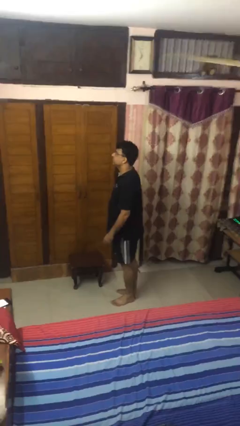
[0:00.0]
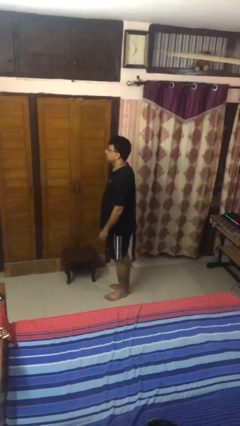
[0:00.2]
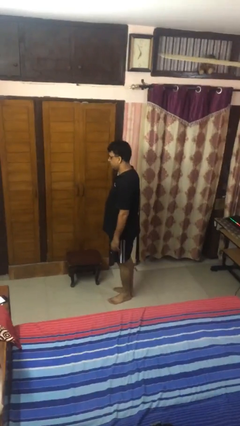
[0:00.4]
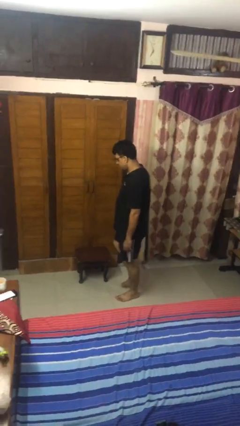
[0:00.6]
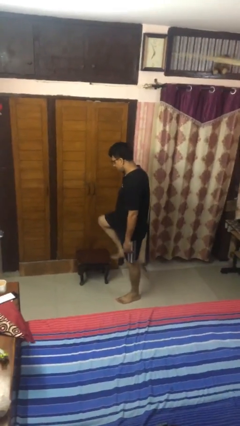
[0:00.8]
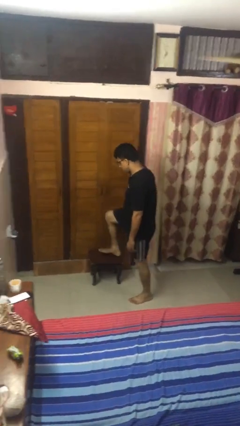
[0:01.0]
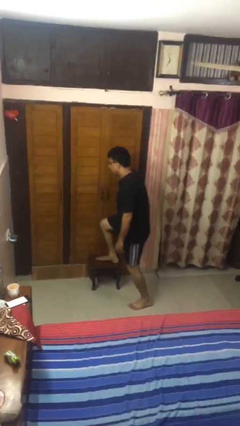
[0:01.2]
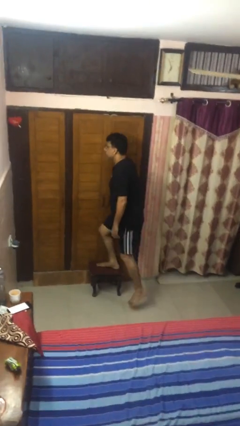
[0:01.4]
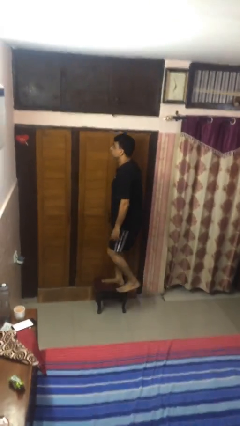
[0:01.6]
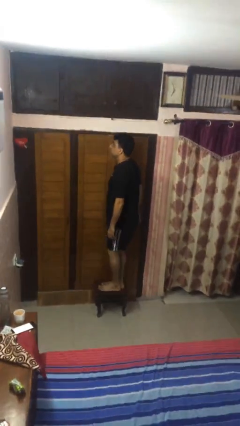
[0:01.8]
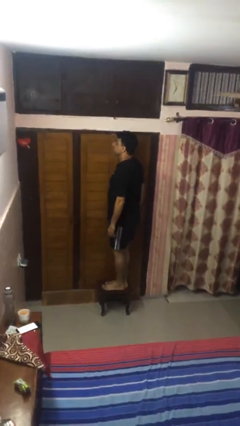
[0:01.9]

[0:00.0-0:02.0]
person climbs on table

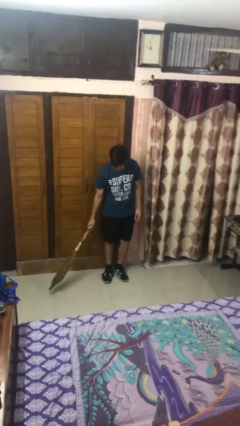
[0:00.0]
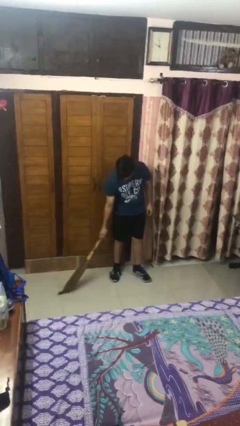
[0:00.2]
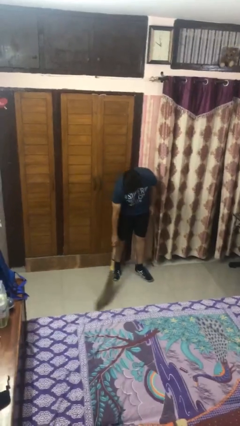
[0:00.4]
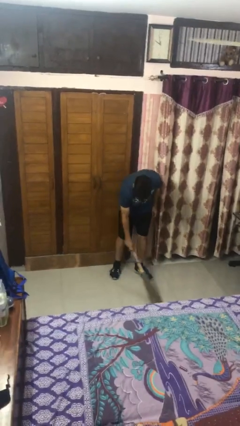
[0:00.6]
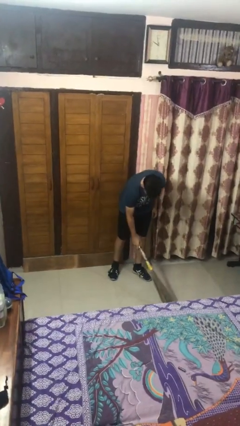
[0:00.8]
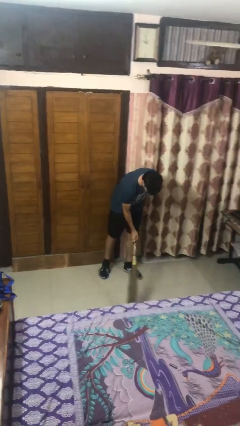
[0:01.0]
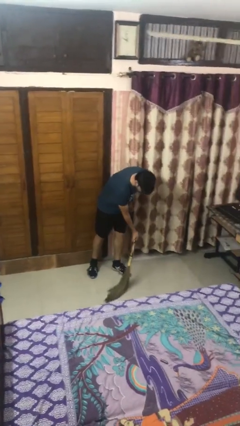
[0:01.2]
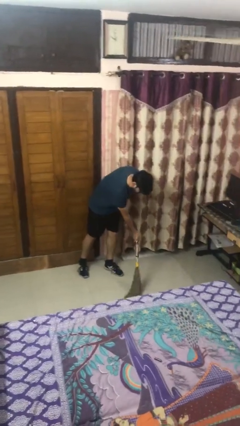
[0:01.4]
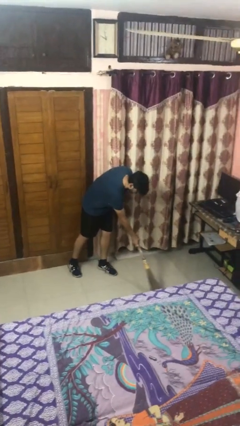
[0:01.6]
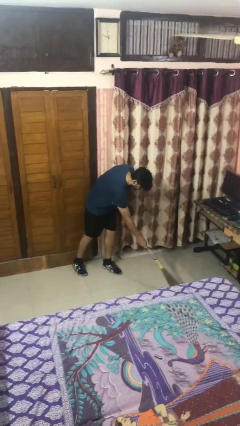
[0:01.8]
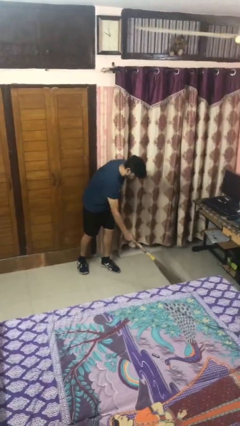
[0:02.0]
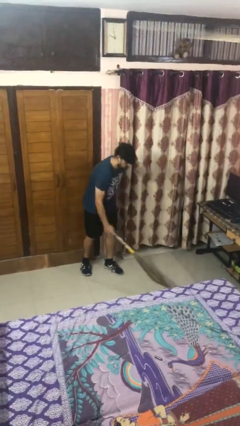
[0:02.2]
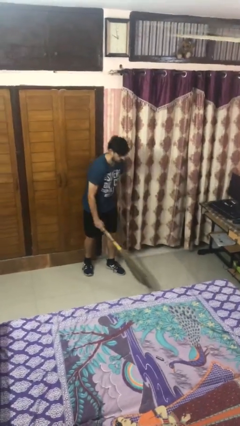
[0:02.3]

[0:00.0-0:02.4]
person sweeps floor

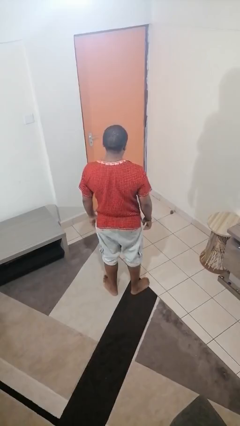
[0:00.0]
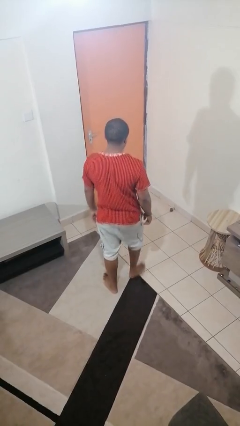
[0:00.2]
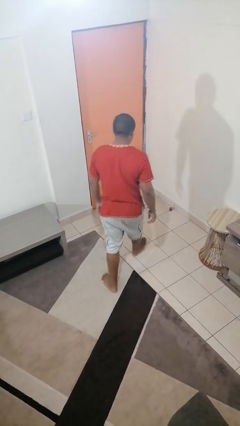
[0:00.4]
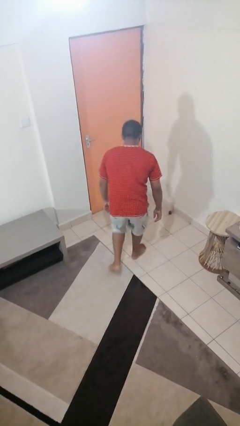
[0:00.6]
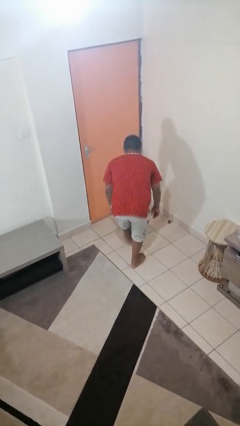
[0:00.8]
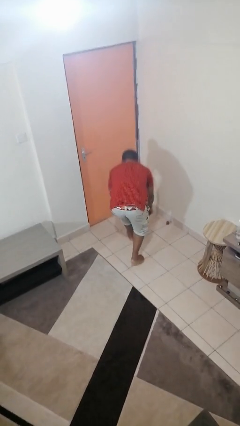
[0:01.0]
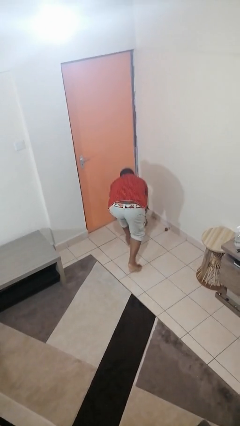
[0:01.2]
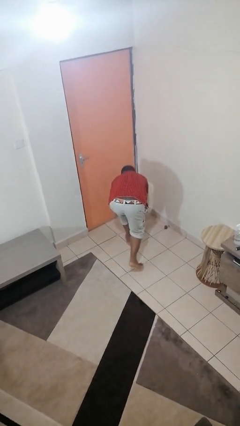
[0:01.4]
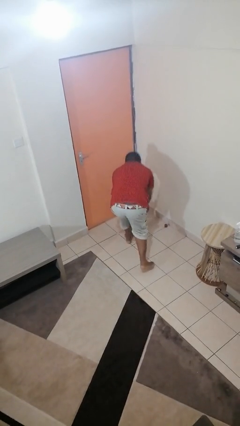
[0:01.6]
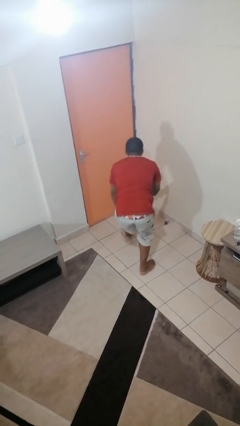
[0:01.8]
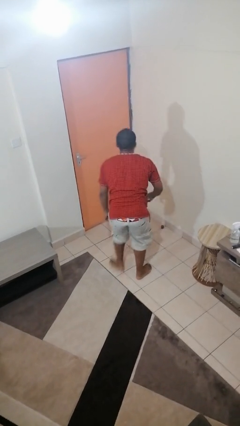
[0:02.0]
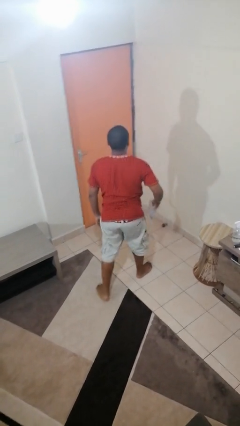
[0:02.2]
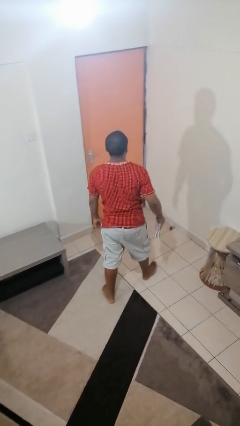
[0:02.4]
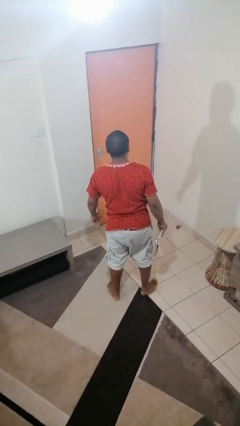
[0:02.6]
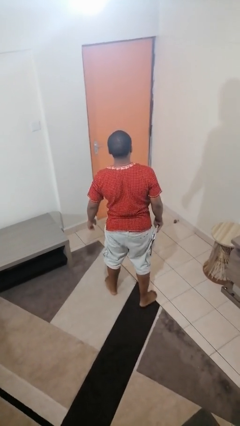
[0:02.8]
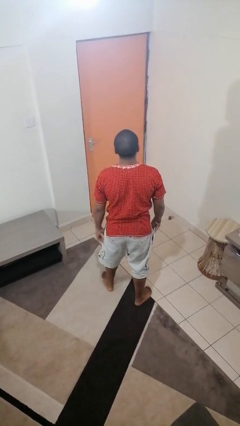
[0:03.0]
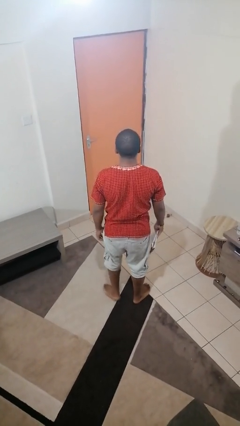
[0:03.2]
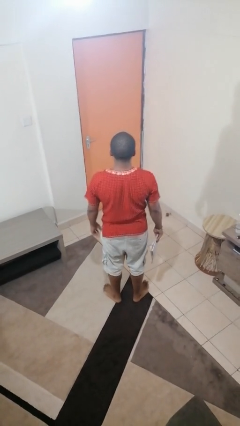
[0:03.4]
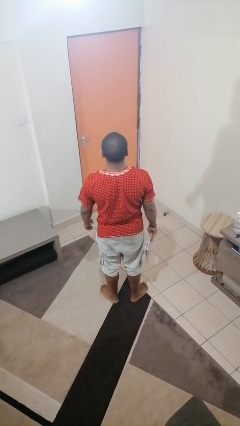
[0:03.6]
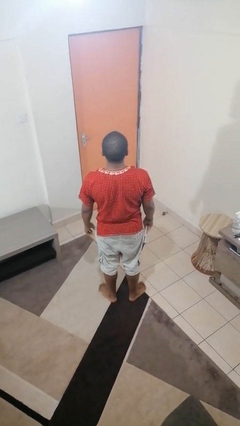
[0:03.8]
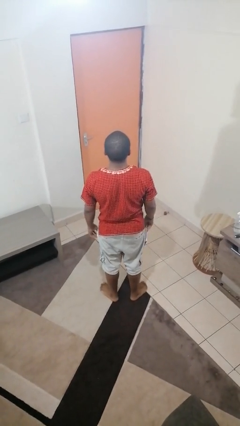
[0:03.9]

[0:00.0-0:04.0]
person picks up object from floor

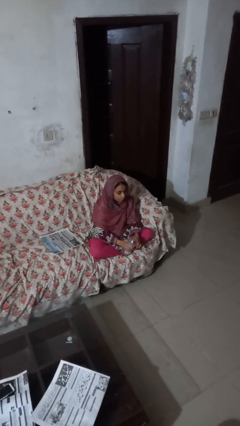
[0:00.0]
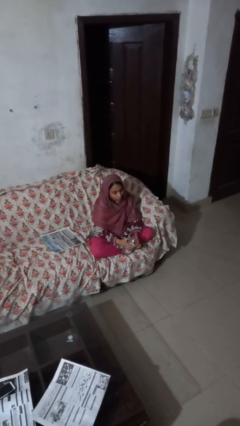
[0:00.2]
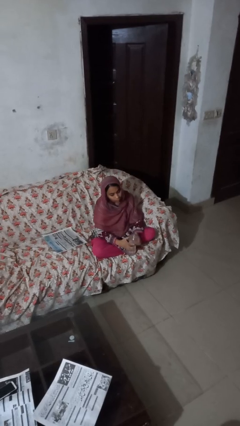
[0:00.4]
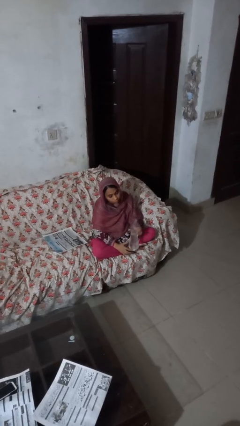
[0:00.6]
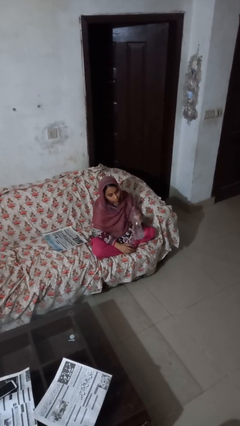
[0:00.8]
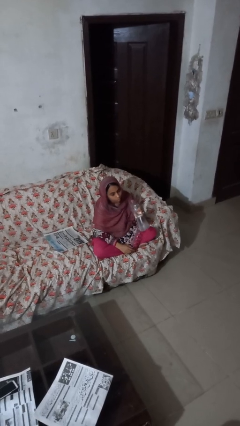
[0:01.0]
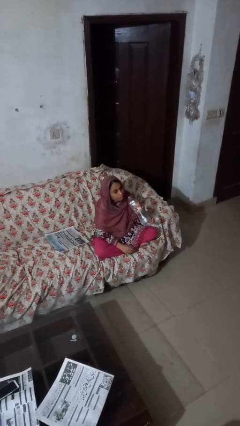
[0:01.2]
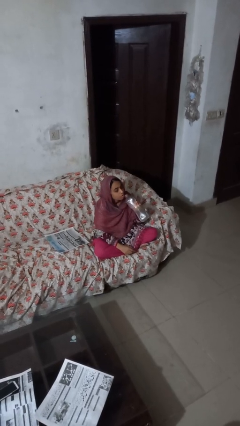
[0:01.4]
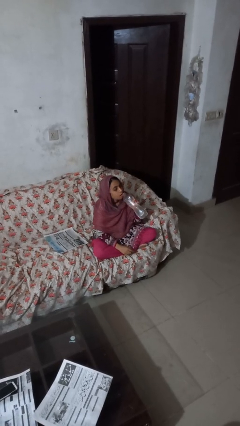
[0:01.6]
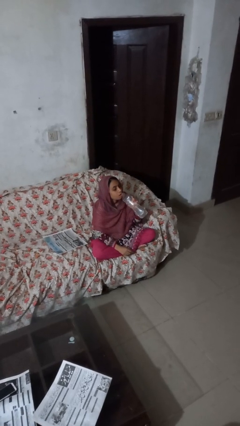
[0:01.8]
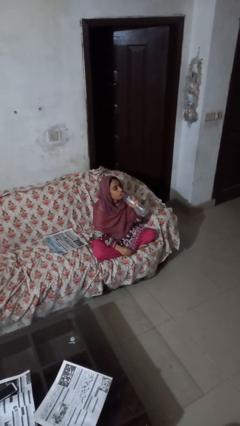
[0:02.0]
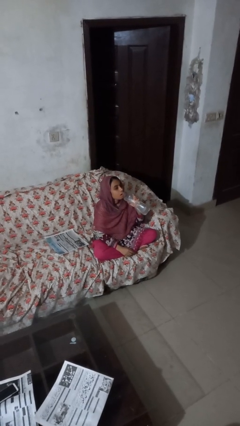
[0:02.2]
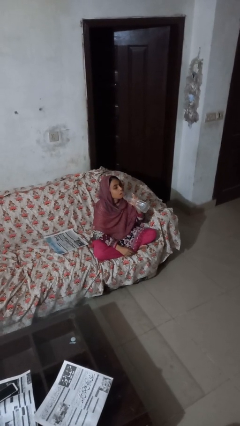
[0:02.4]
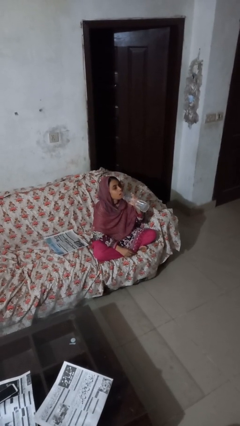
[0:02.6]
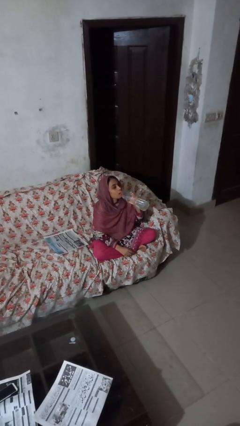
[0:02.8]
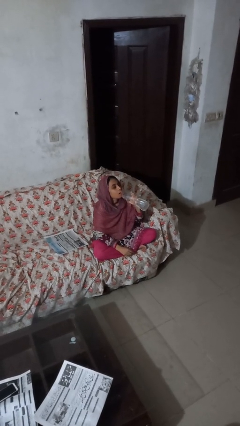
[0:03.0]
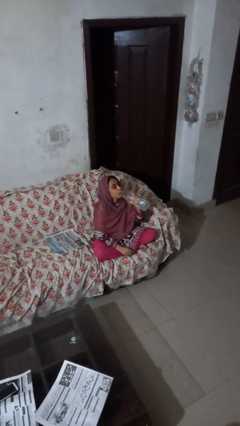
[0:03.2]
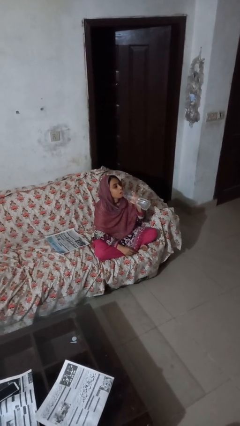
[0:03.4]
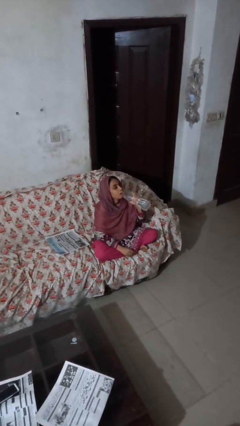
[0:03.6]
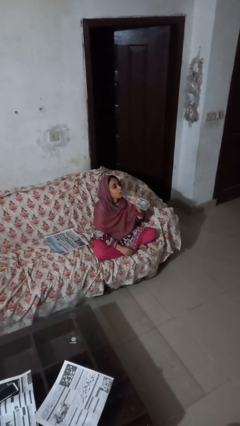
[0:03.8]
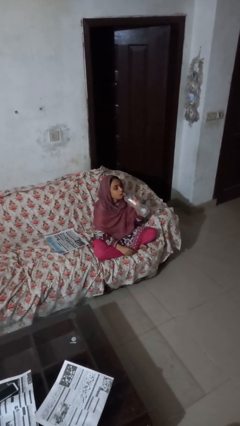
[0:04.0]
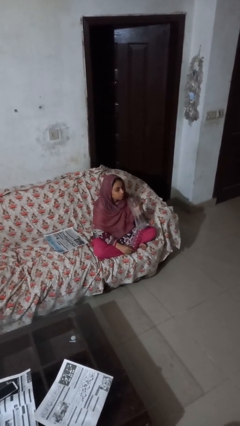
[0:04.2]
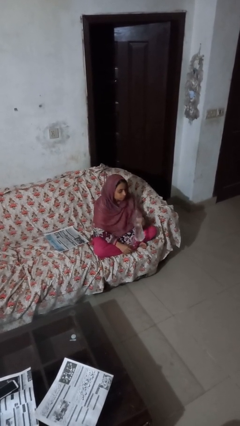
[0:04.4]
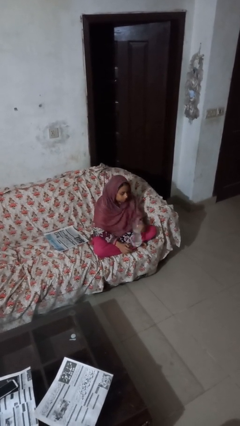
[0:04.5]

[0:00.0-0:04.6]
person drinks from bottle

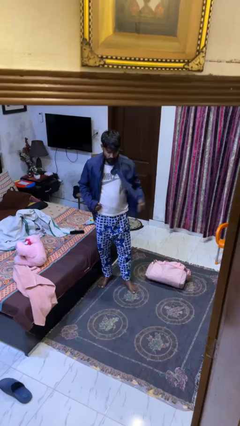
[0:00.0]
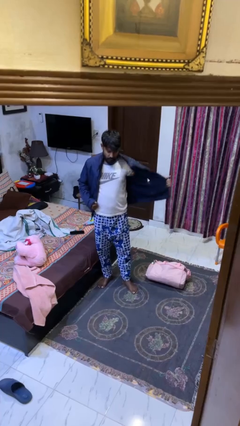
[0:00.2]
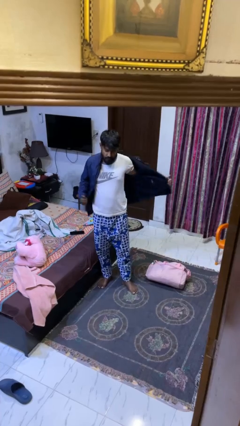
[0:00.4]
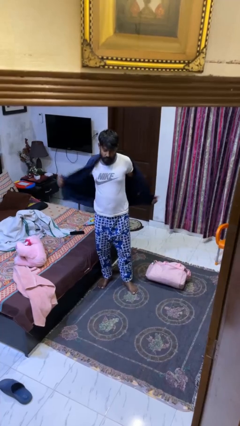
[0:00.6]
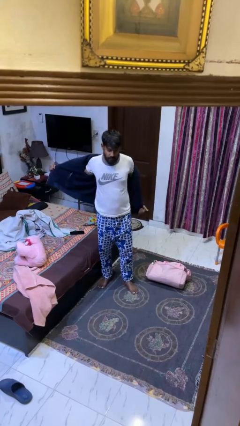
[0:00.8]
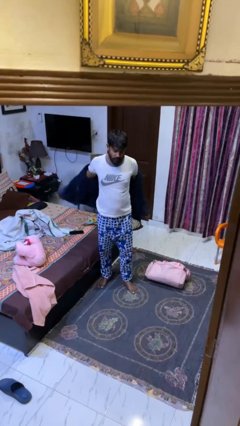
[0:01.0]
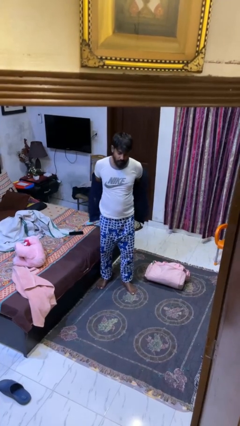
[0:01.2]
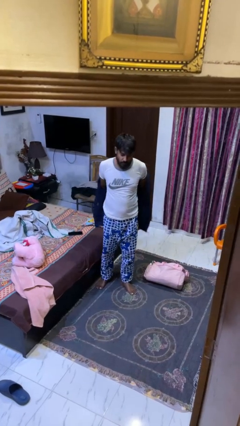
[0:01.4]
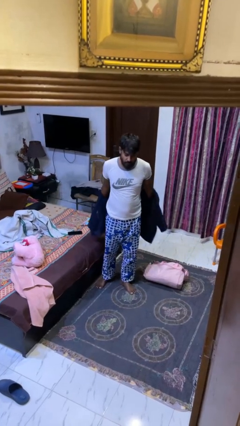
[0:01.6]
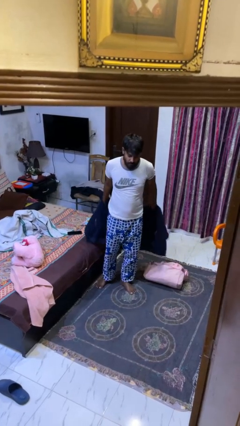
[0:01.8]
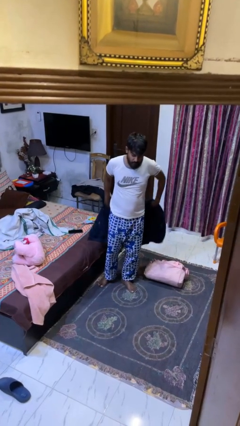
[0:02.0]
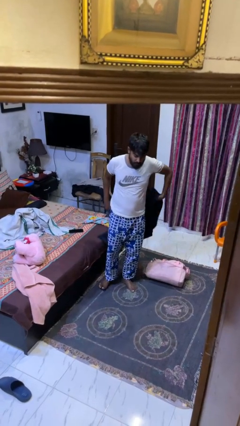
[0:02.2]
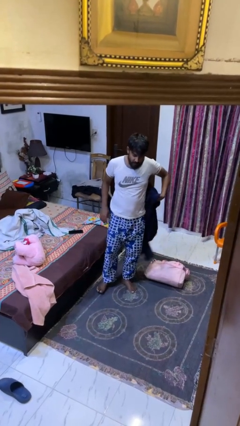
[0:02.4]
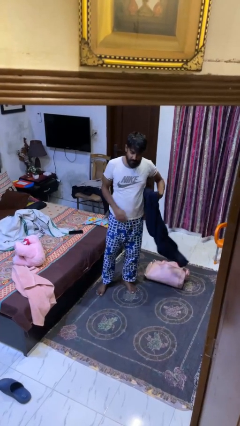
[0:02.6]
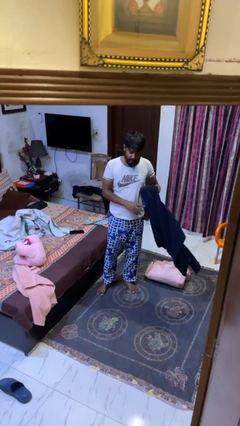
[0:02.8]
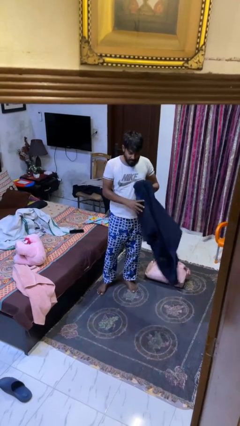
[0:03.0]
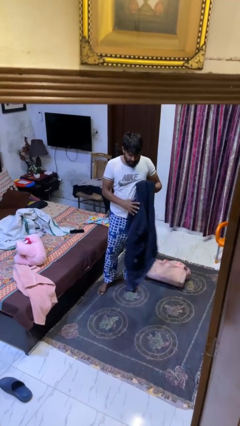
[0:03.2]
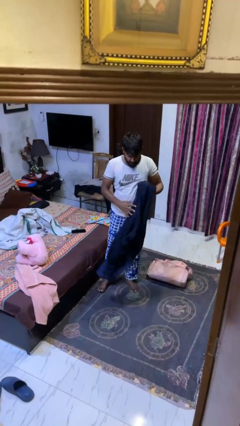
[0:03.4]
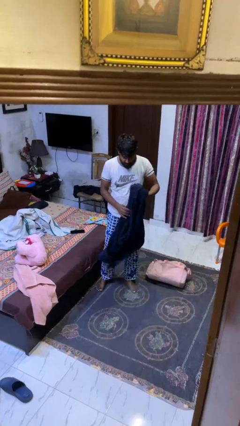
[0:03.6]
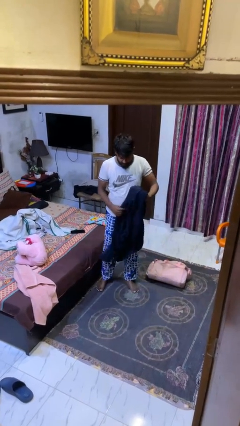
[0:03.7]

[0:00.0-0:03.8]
person takes off jacket

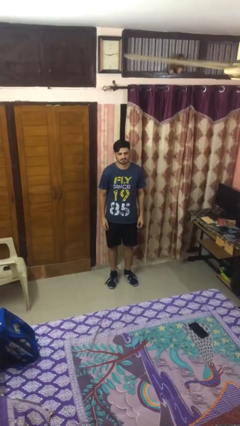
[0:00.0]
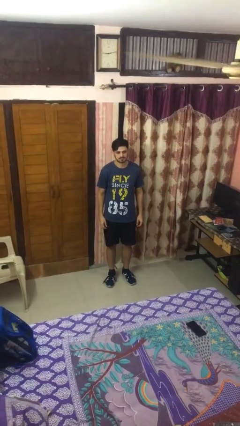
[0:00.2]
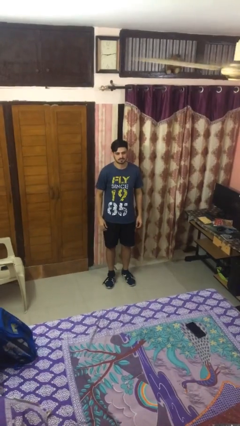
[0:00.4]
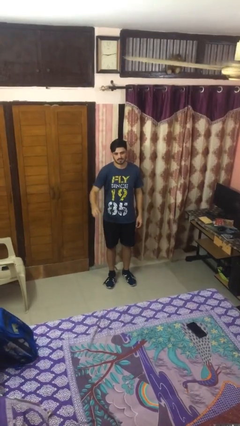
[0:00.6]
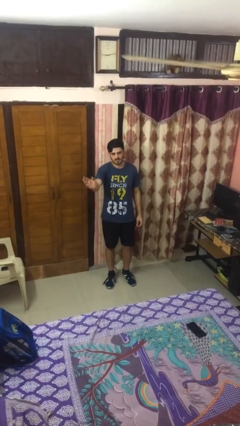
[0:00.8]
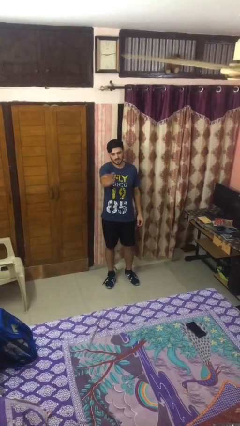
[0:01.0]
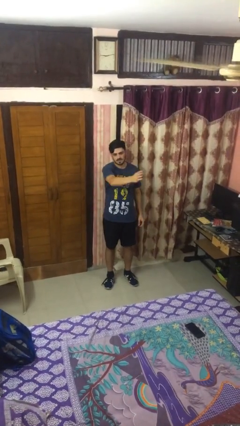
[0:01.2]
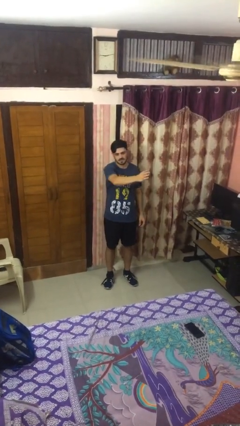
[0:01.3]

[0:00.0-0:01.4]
person gestures swipe left
